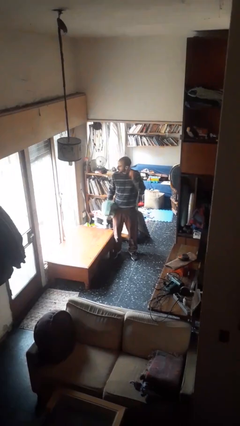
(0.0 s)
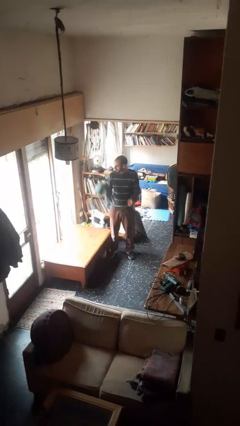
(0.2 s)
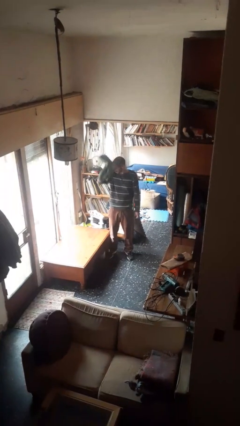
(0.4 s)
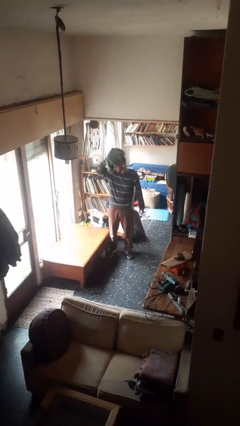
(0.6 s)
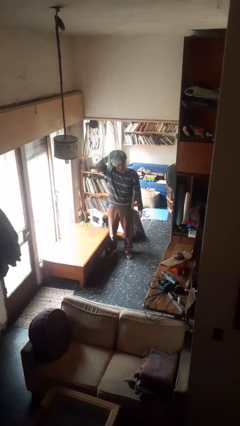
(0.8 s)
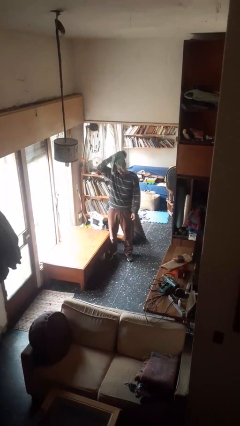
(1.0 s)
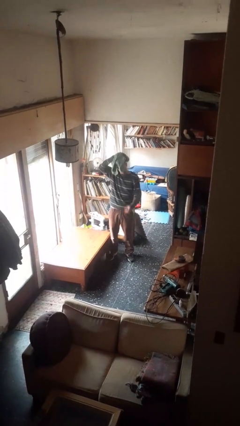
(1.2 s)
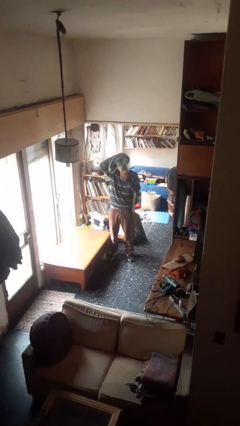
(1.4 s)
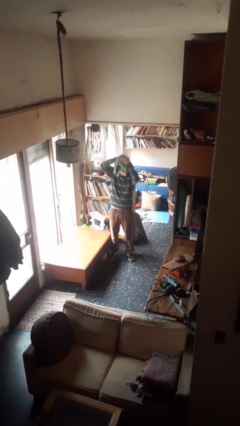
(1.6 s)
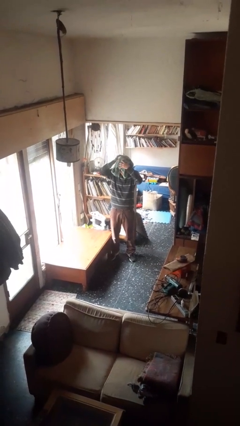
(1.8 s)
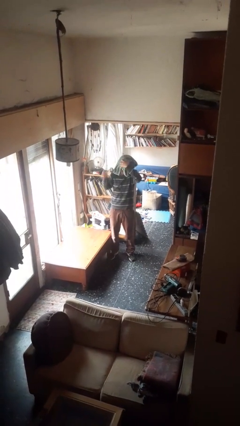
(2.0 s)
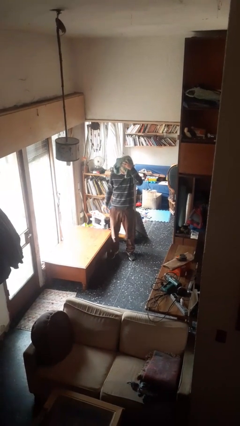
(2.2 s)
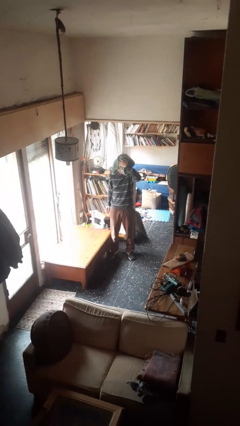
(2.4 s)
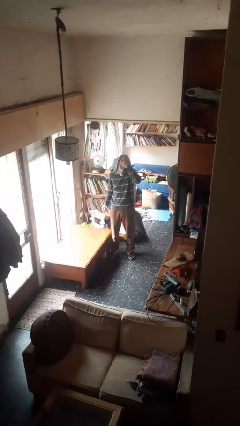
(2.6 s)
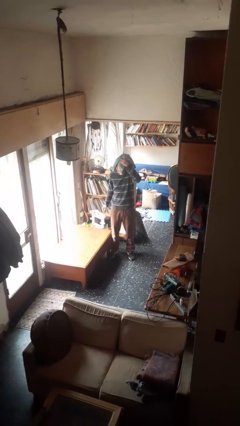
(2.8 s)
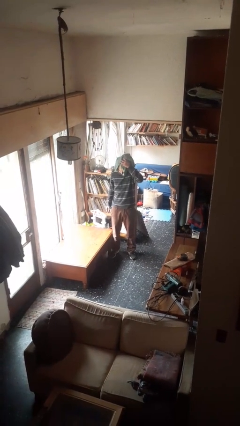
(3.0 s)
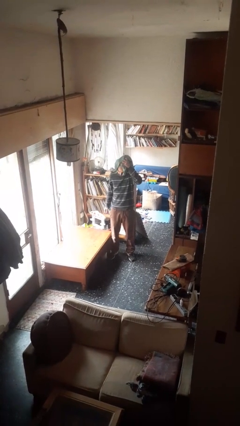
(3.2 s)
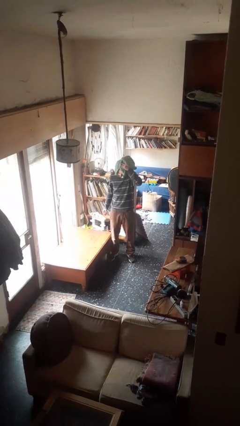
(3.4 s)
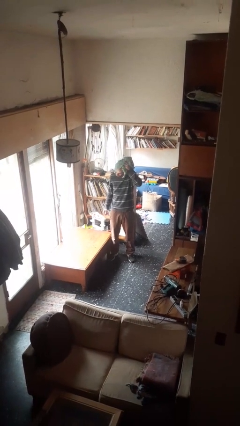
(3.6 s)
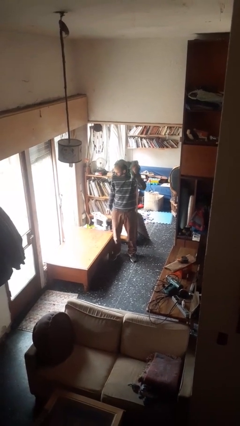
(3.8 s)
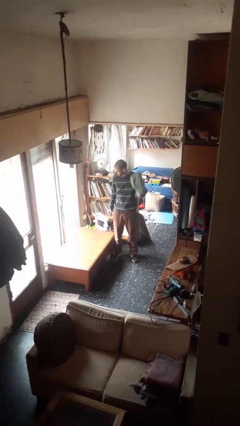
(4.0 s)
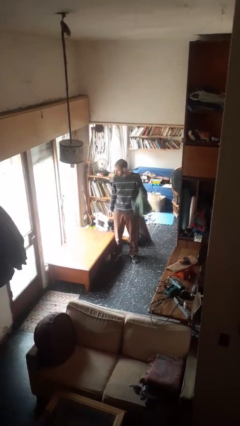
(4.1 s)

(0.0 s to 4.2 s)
person dries hair with towel

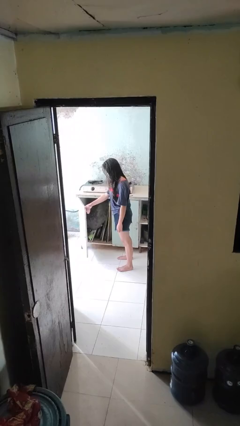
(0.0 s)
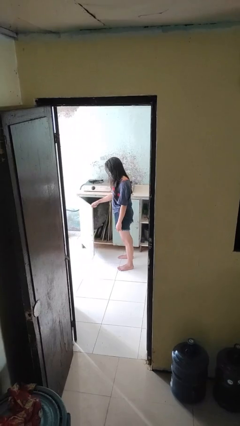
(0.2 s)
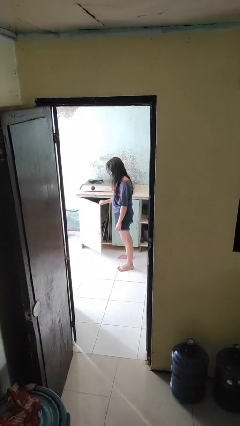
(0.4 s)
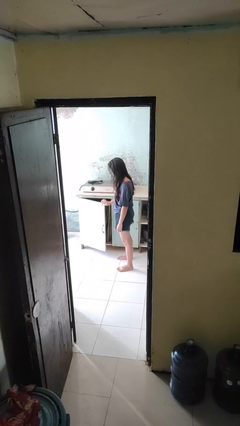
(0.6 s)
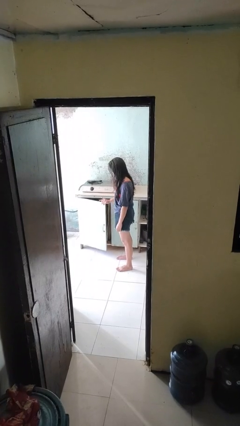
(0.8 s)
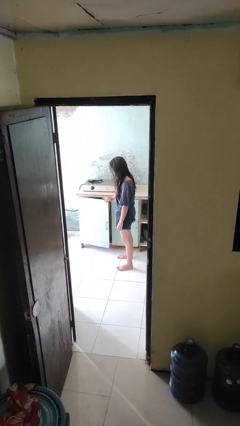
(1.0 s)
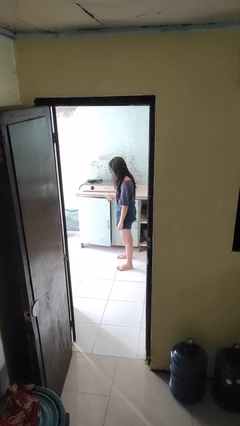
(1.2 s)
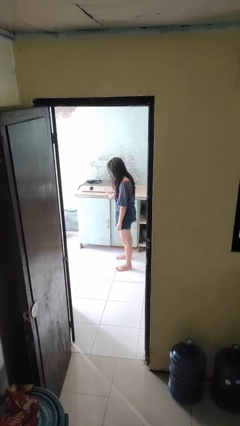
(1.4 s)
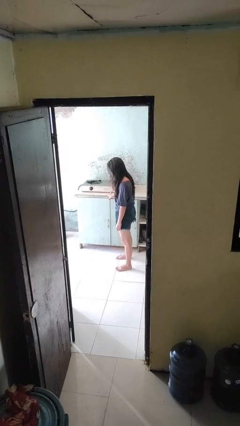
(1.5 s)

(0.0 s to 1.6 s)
person closes cabinet

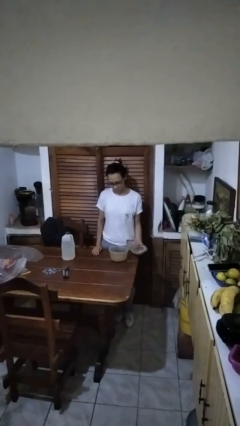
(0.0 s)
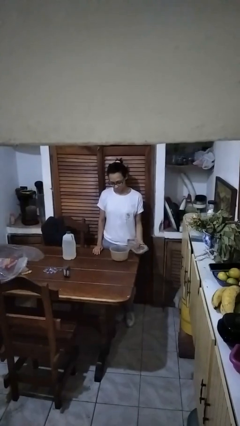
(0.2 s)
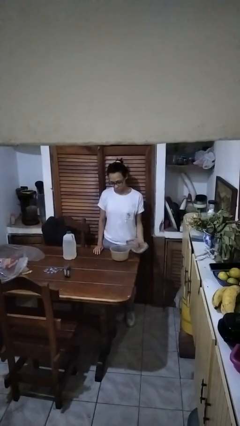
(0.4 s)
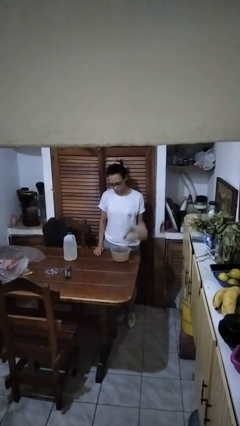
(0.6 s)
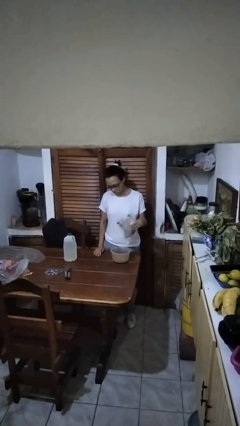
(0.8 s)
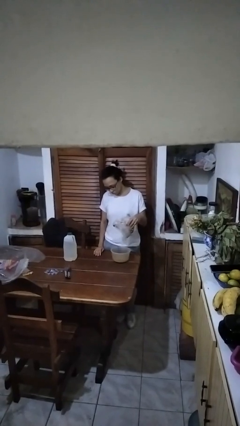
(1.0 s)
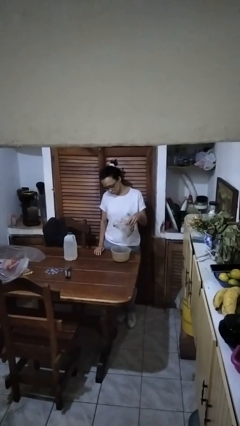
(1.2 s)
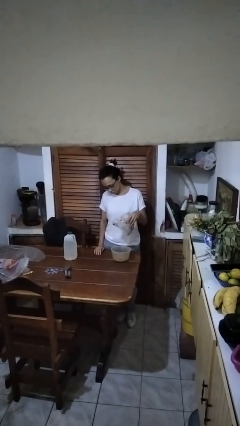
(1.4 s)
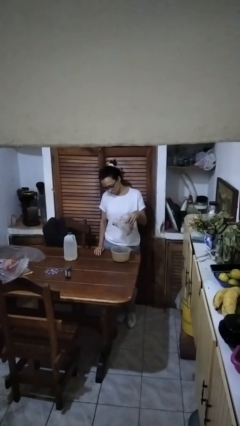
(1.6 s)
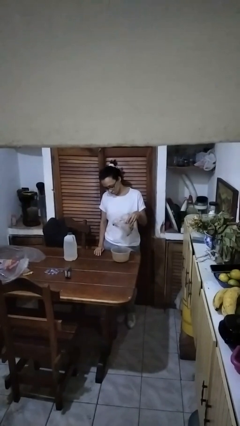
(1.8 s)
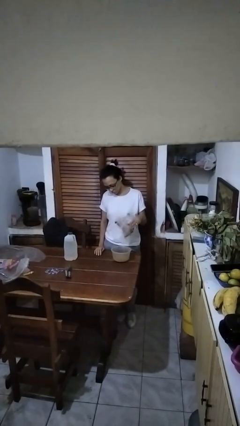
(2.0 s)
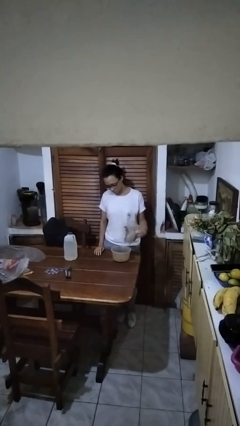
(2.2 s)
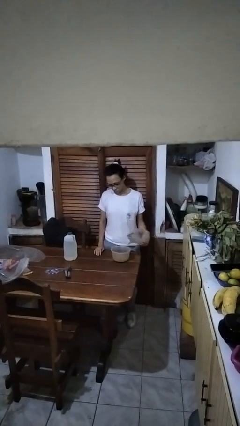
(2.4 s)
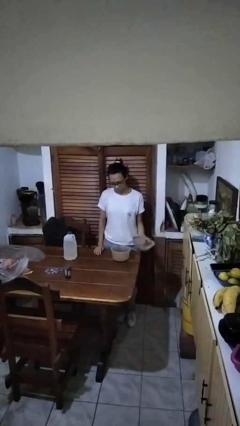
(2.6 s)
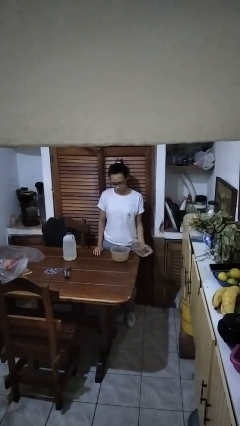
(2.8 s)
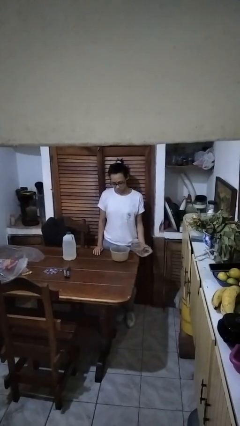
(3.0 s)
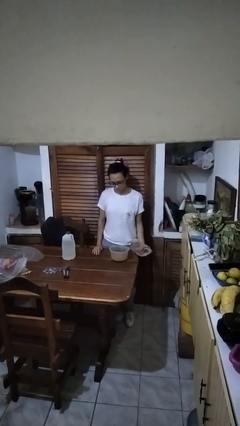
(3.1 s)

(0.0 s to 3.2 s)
person pours into bowl

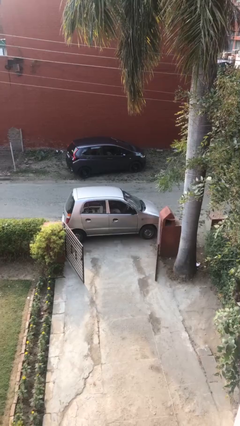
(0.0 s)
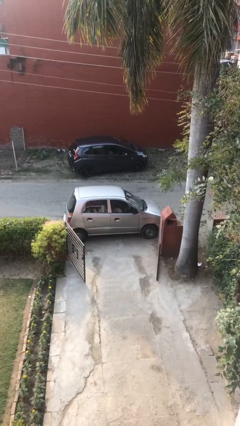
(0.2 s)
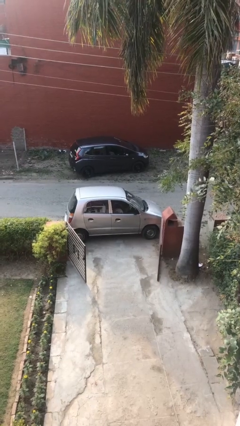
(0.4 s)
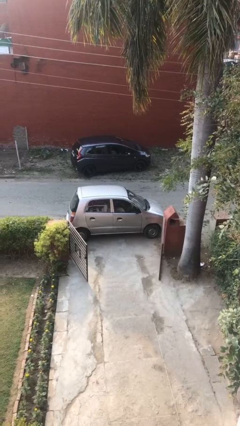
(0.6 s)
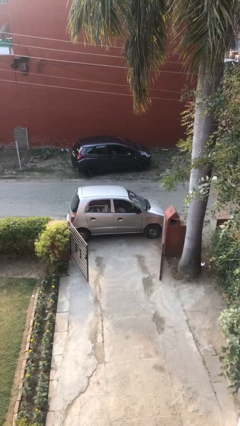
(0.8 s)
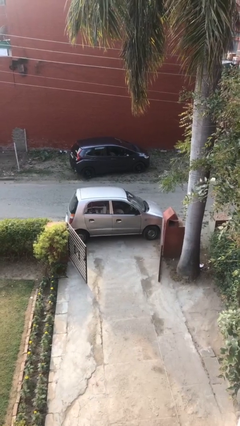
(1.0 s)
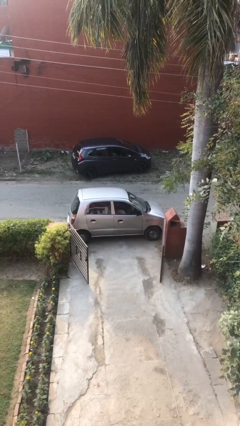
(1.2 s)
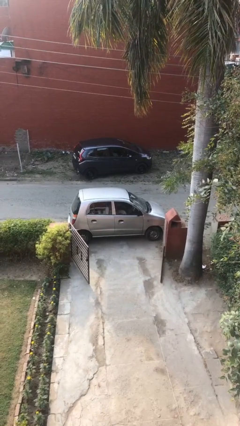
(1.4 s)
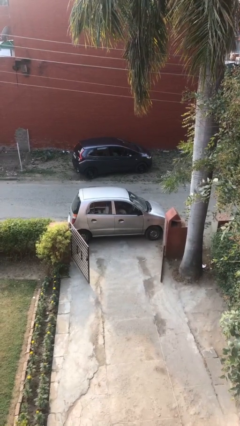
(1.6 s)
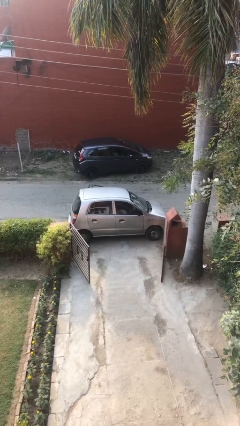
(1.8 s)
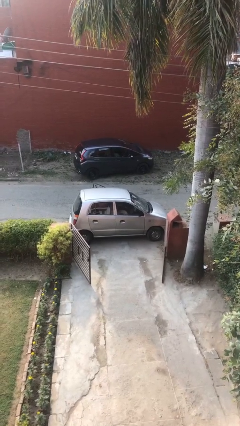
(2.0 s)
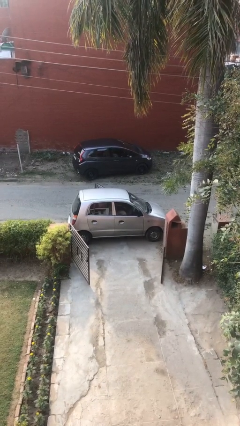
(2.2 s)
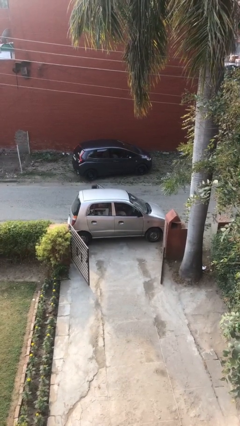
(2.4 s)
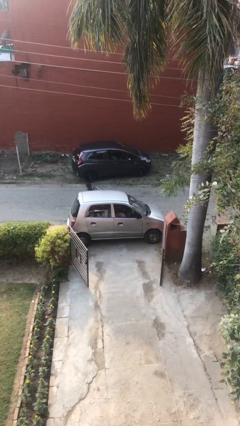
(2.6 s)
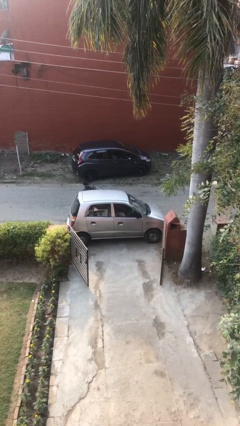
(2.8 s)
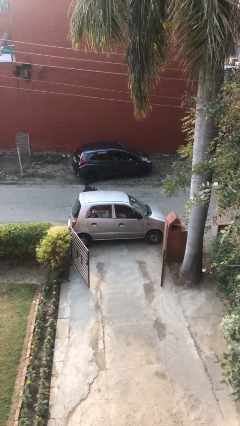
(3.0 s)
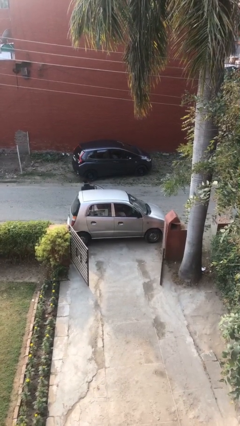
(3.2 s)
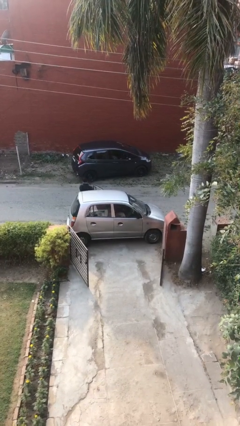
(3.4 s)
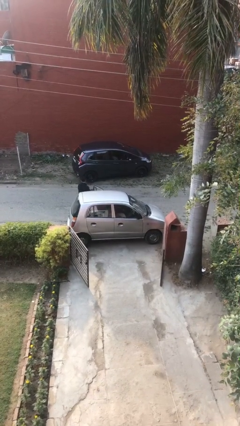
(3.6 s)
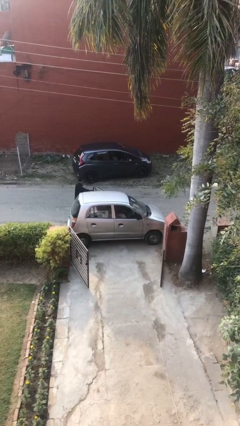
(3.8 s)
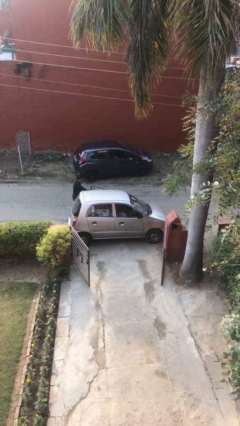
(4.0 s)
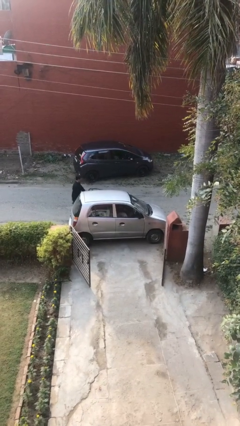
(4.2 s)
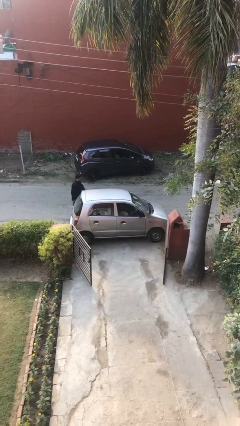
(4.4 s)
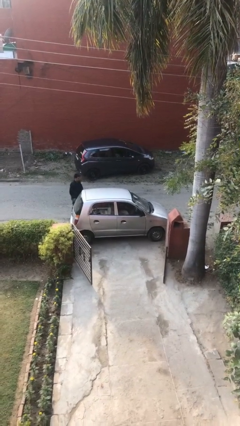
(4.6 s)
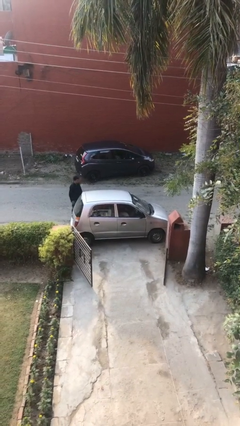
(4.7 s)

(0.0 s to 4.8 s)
car drops off person

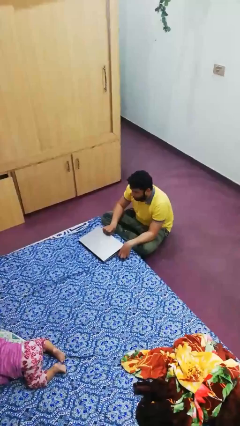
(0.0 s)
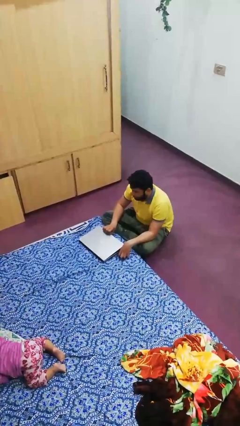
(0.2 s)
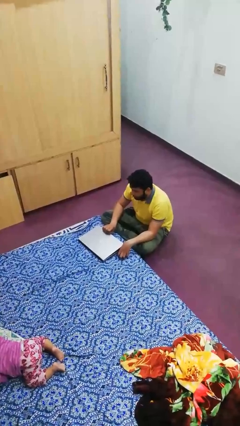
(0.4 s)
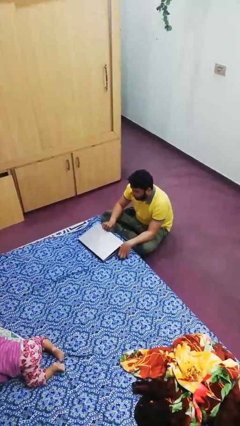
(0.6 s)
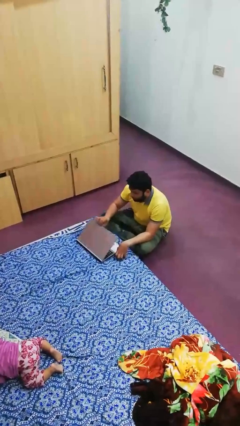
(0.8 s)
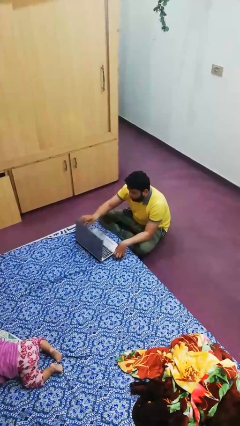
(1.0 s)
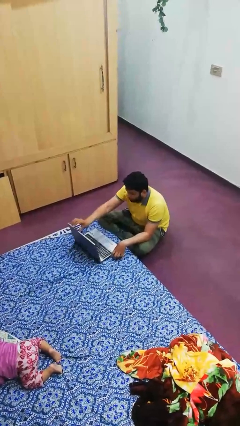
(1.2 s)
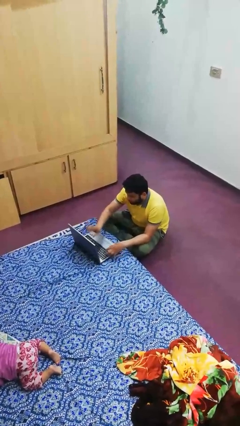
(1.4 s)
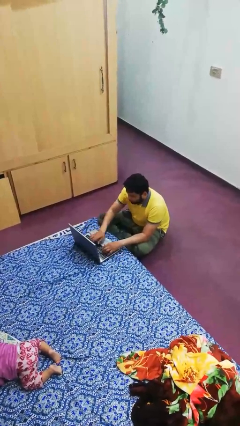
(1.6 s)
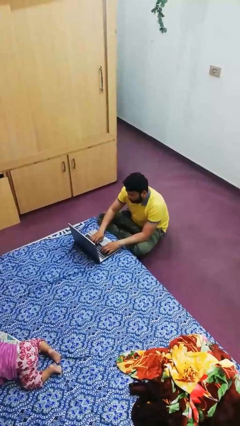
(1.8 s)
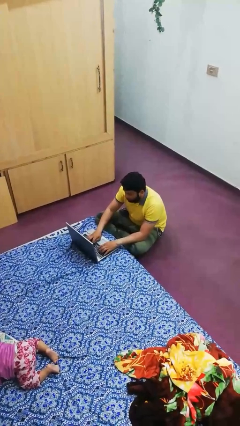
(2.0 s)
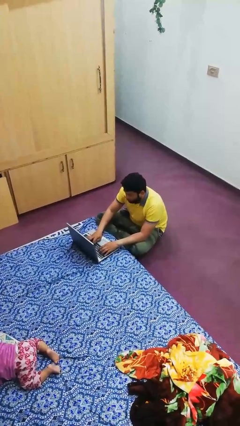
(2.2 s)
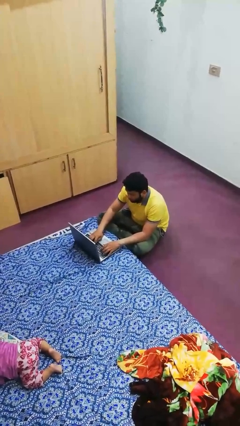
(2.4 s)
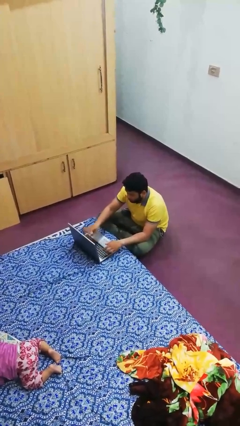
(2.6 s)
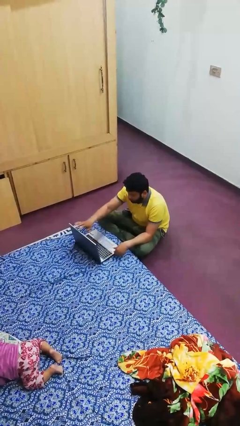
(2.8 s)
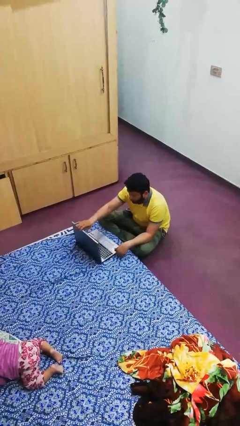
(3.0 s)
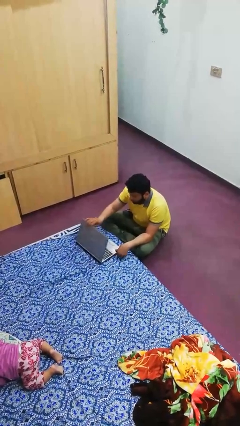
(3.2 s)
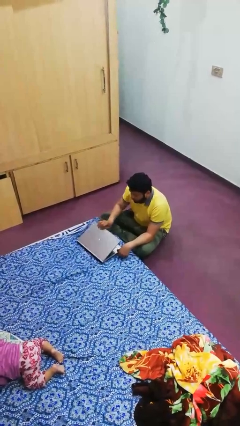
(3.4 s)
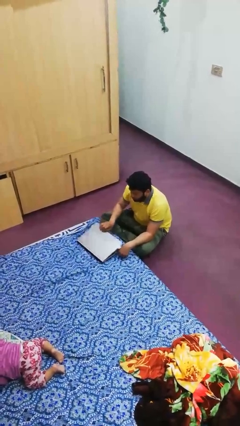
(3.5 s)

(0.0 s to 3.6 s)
person interacts with laptop

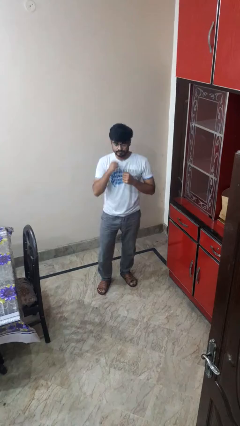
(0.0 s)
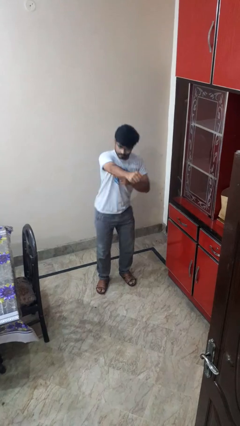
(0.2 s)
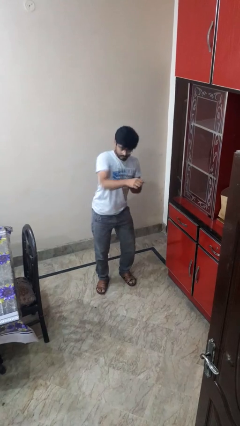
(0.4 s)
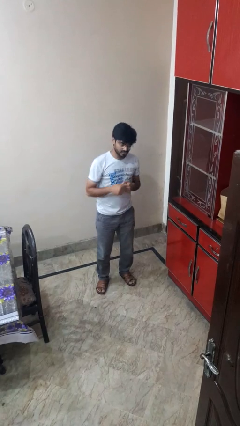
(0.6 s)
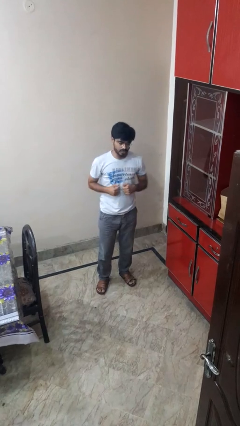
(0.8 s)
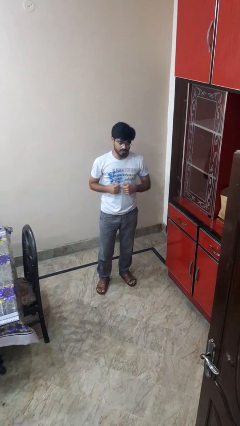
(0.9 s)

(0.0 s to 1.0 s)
person punches
